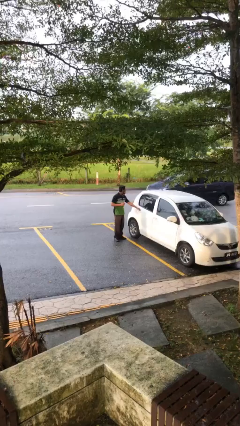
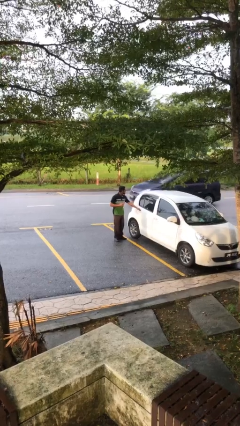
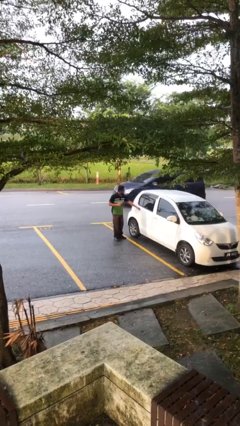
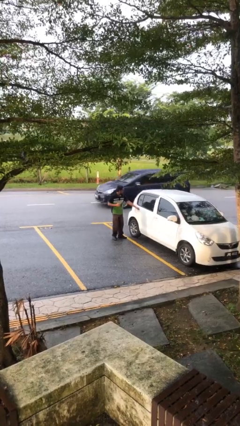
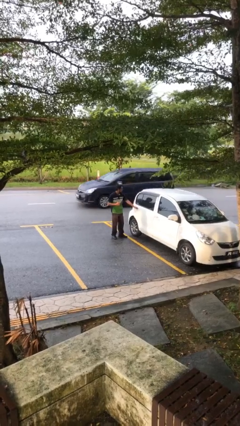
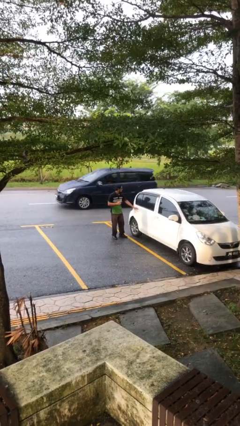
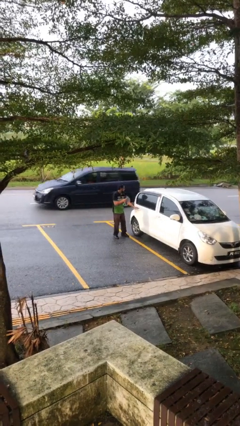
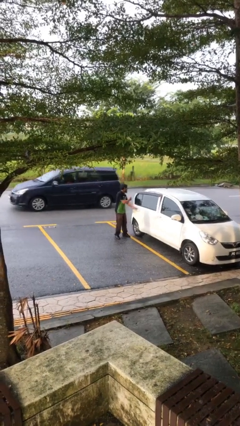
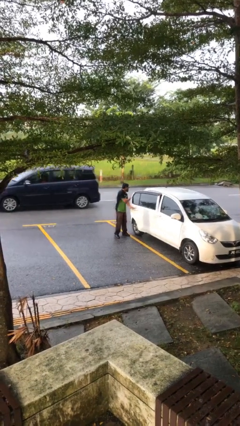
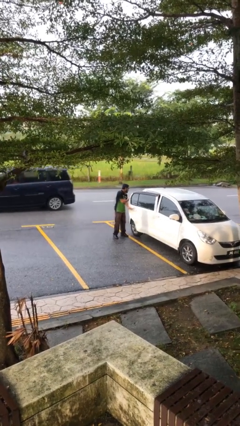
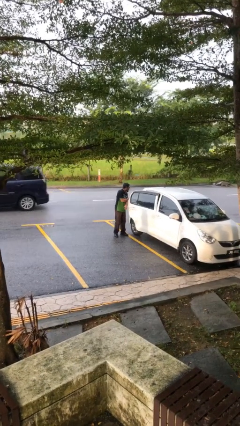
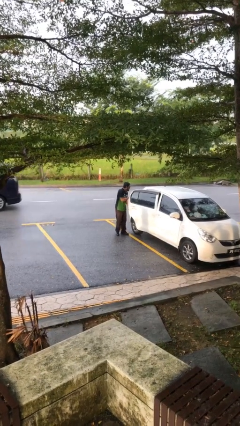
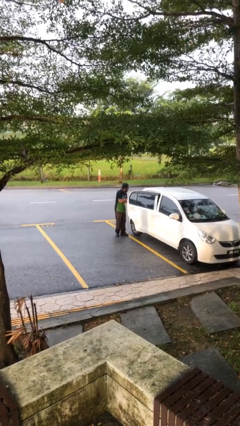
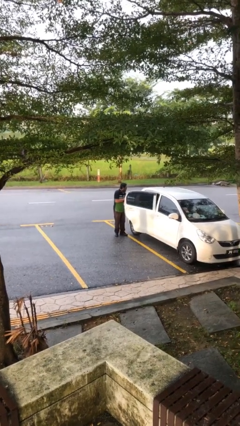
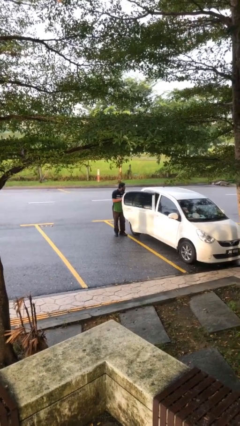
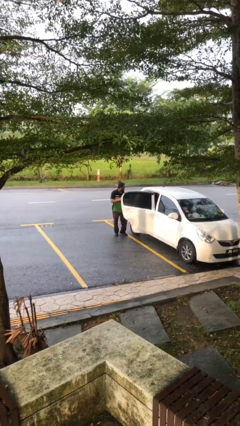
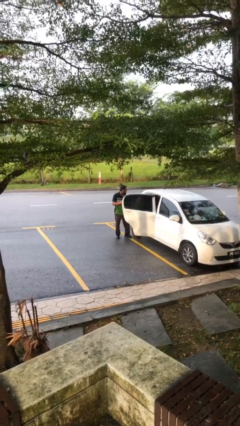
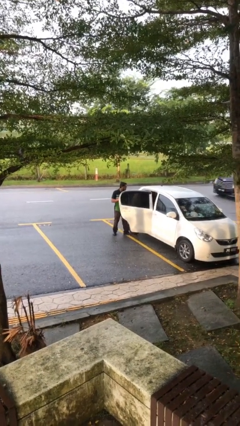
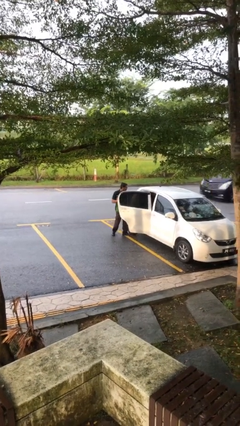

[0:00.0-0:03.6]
person opens car door

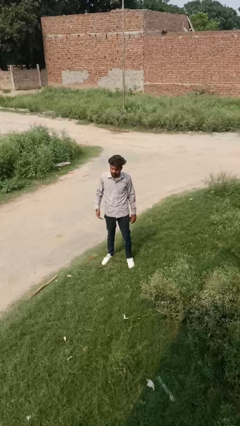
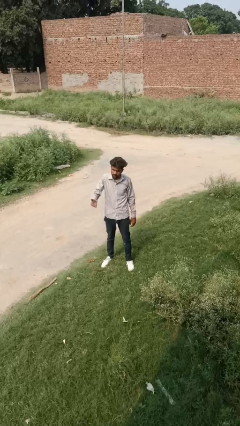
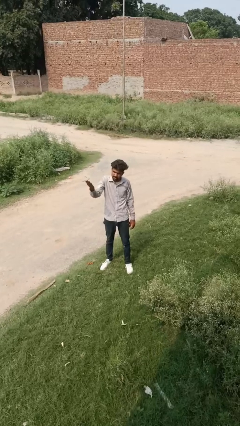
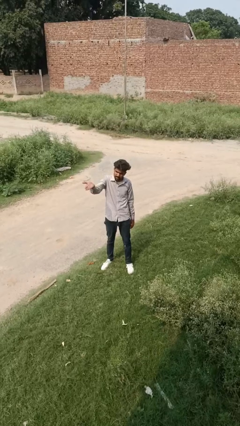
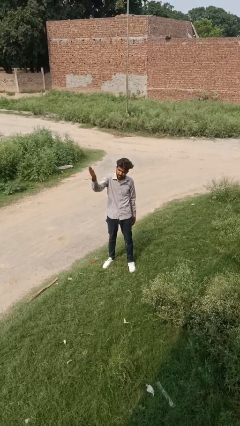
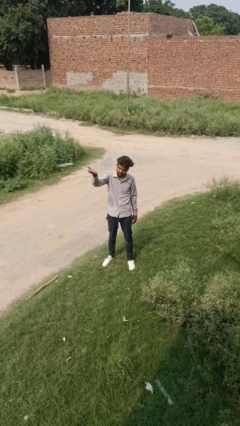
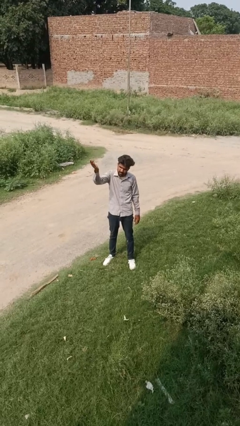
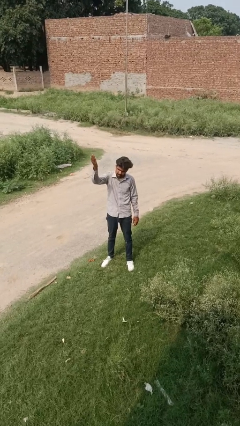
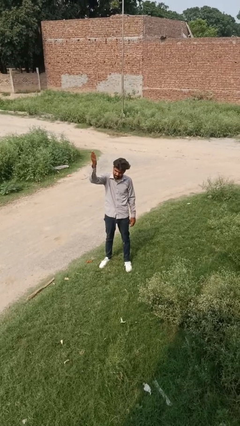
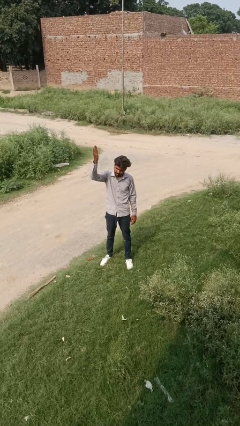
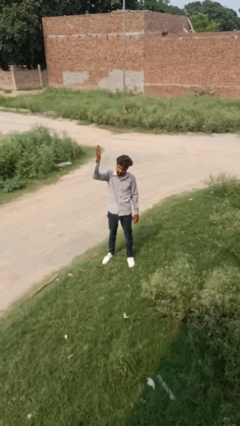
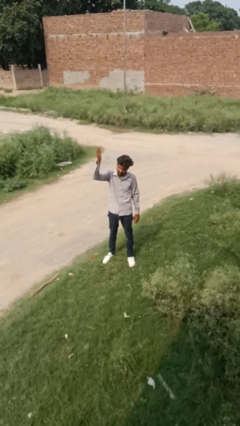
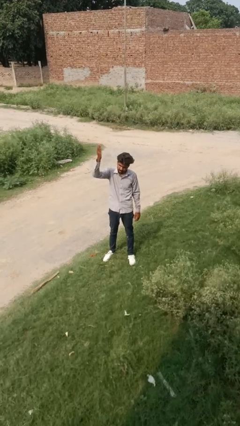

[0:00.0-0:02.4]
person gestures swipe up

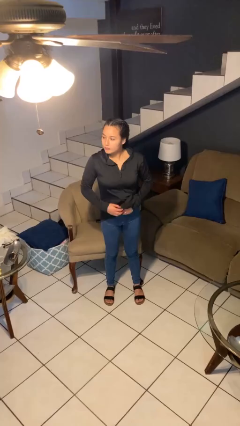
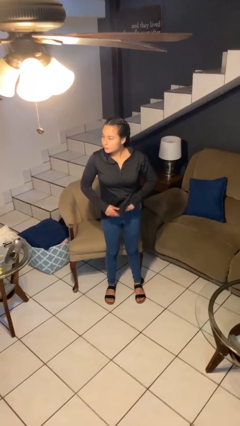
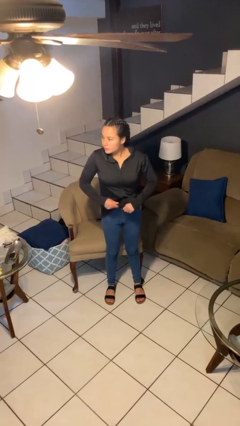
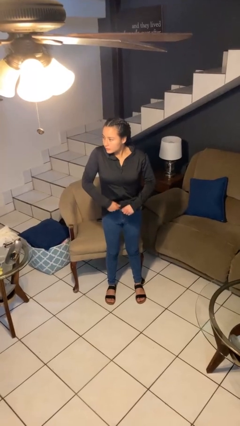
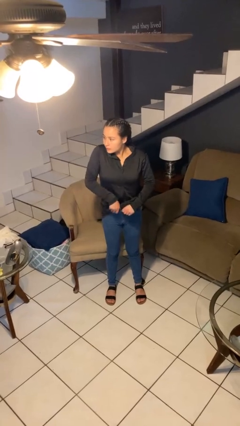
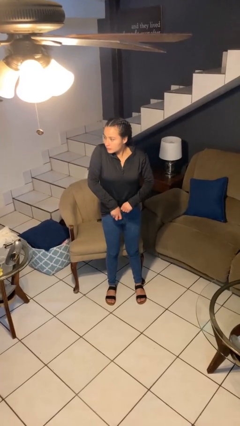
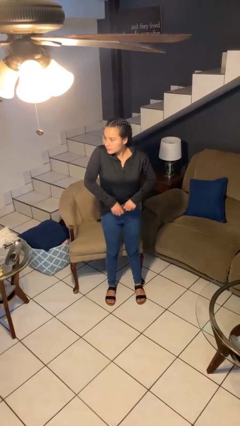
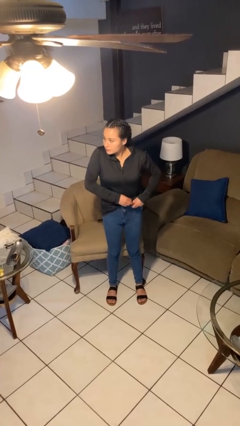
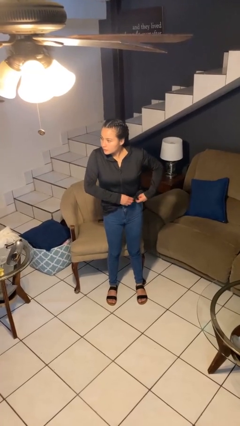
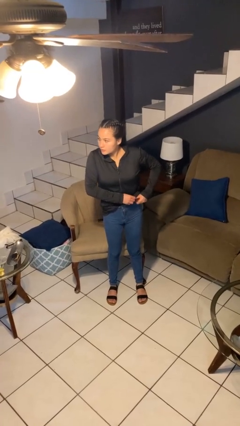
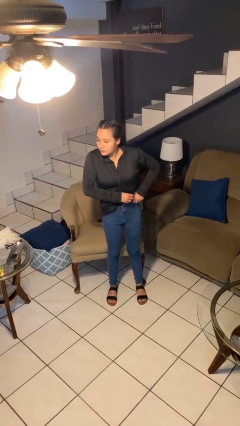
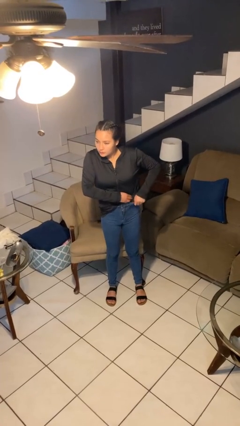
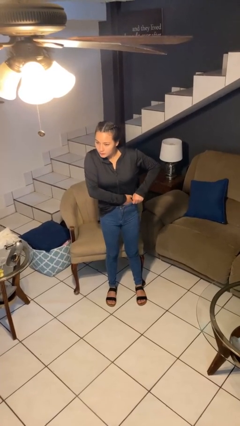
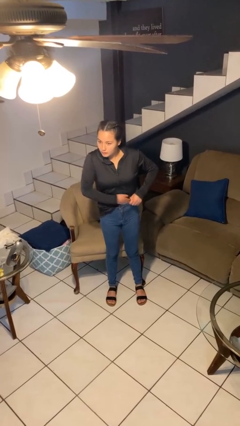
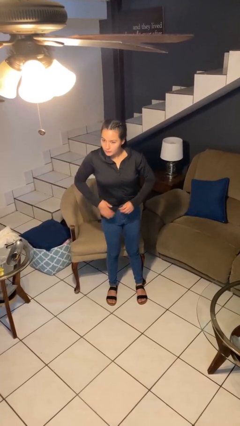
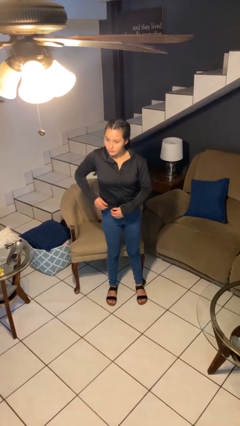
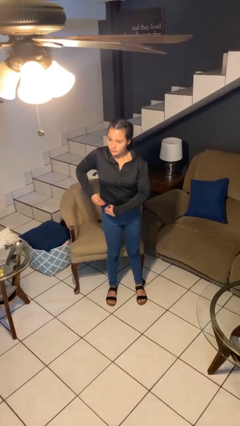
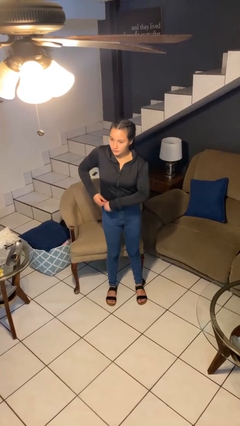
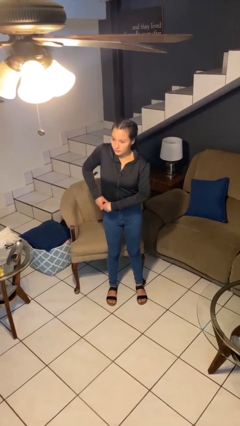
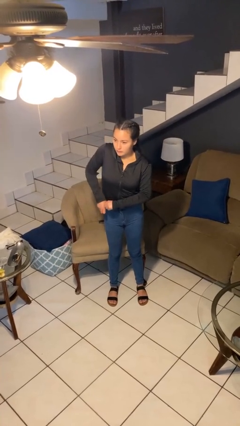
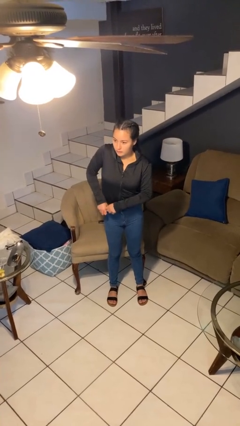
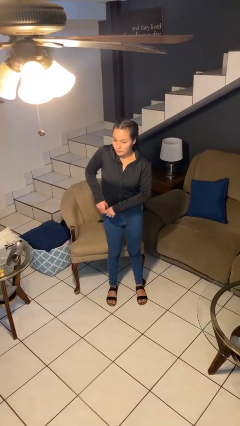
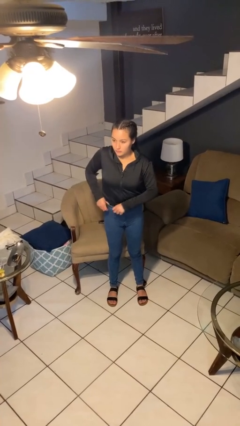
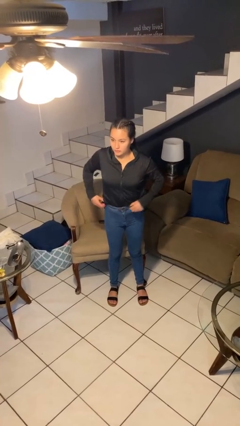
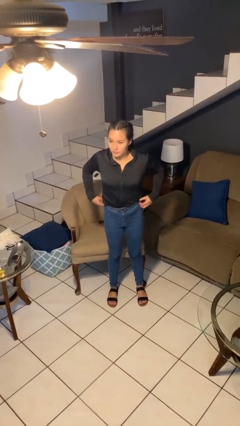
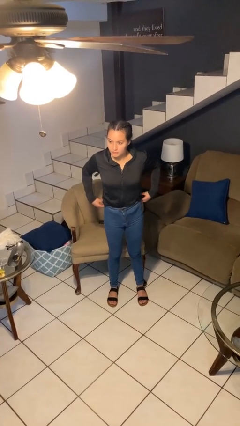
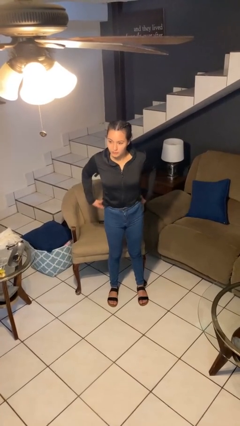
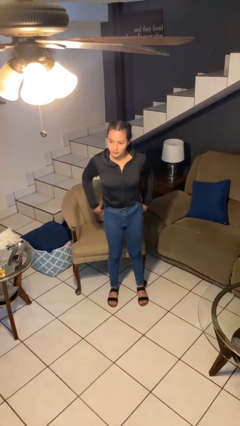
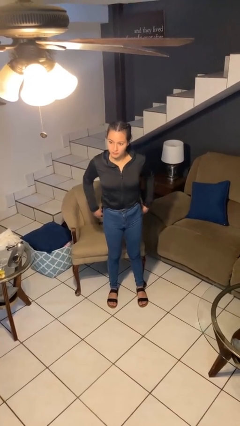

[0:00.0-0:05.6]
person tucks in shirt

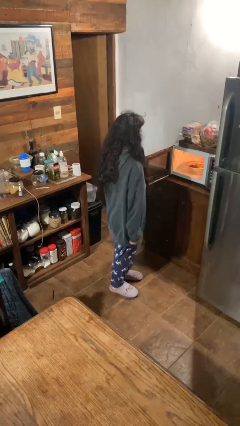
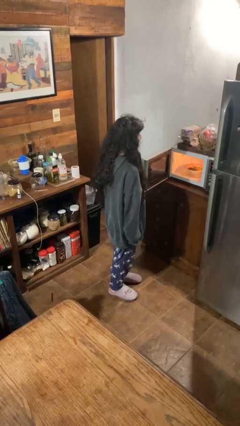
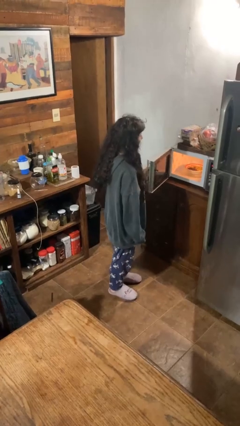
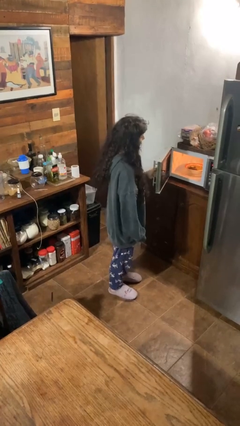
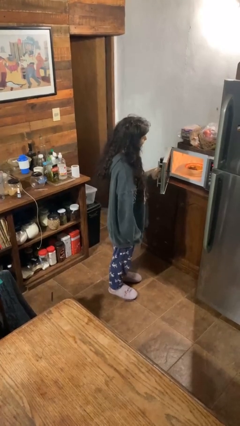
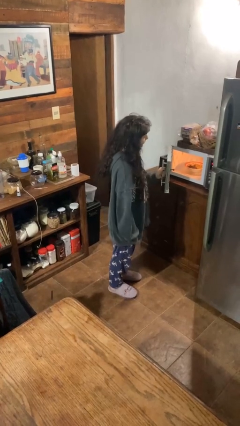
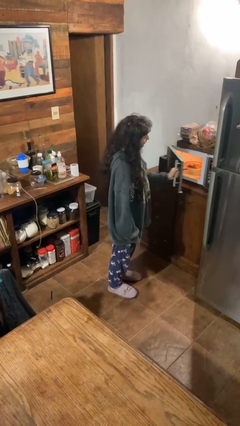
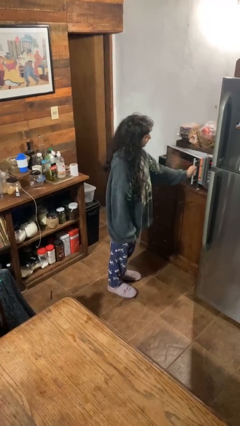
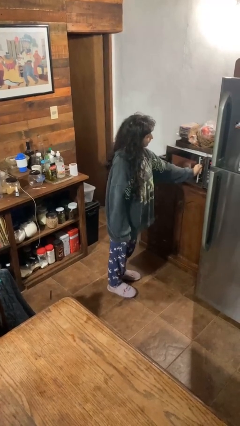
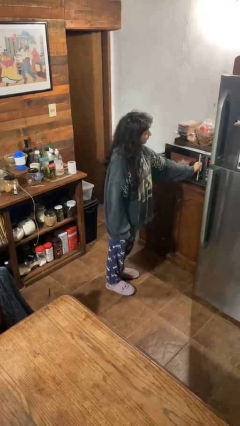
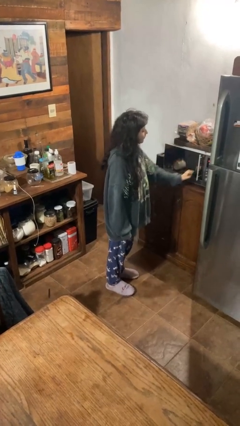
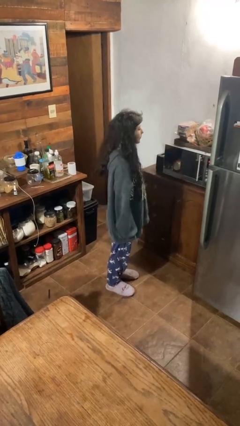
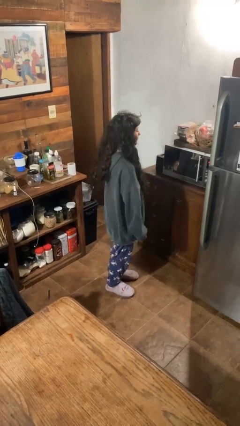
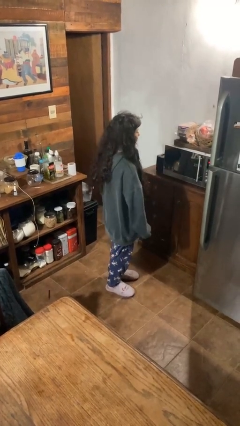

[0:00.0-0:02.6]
person closes microwave

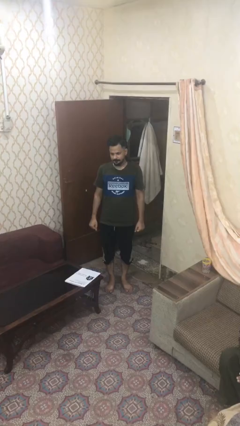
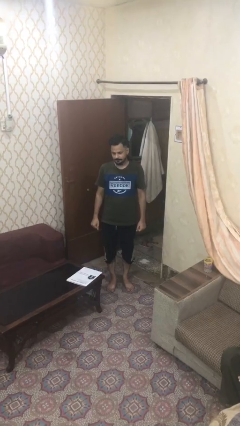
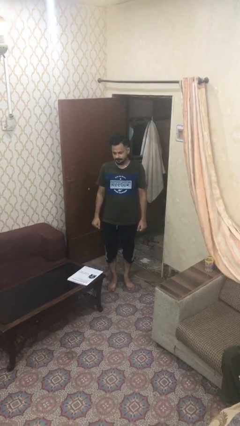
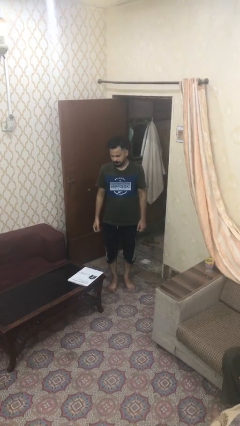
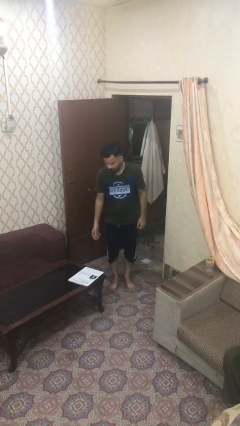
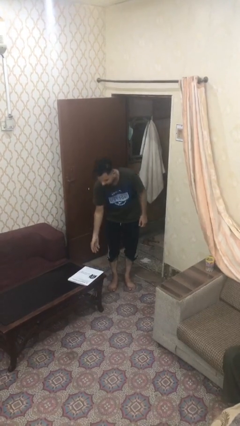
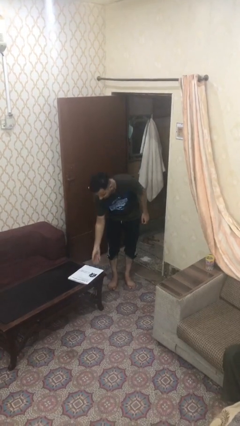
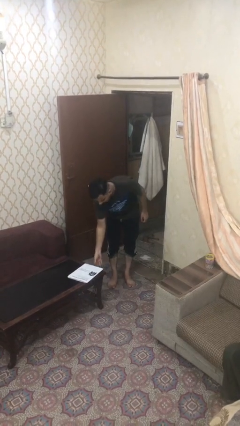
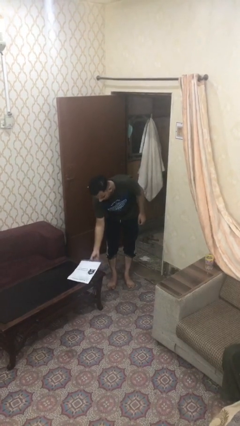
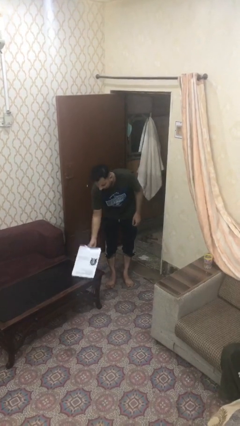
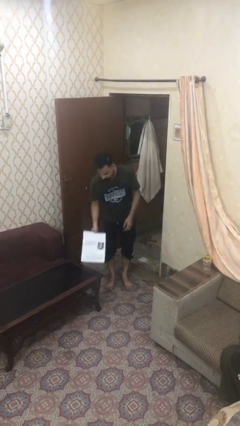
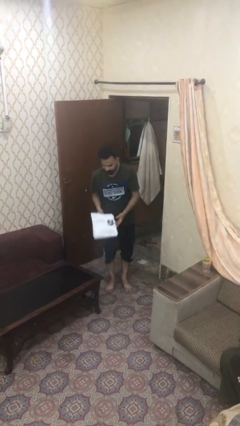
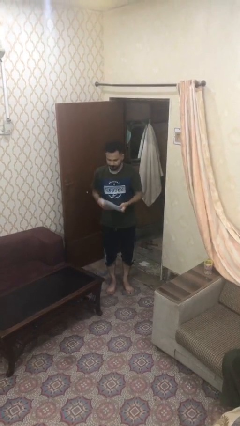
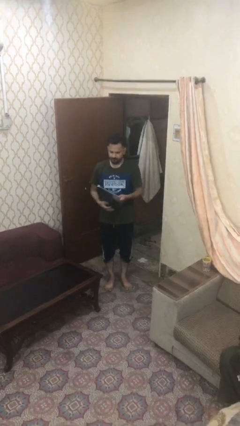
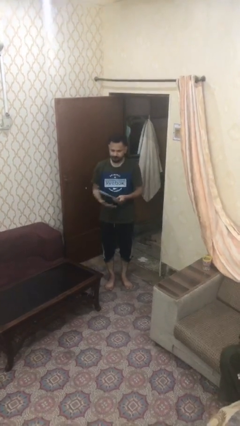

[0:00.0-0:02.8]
person picks up object from table

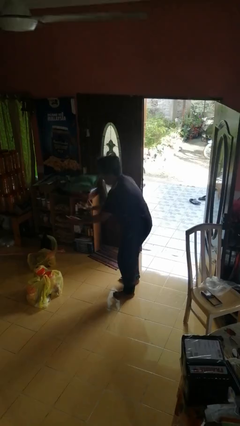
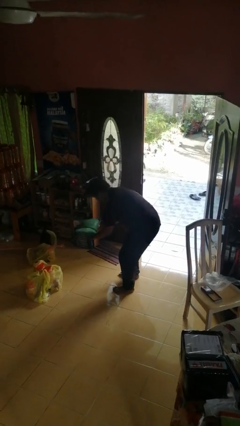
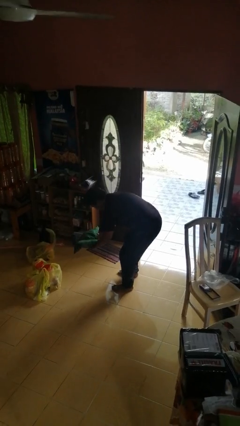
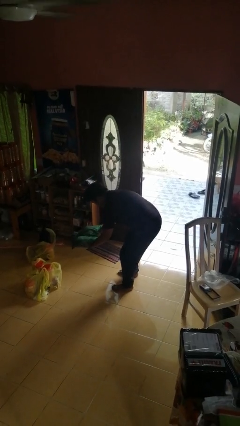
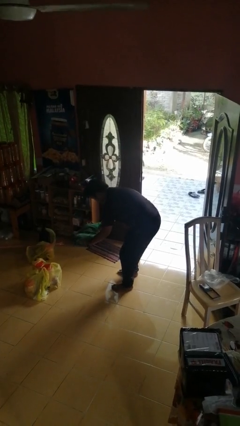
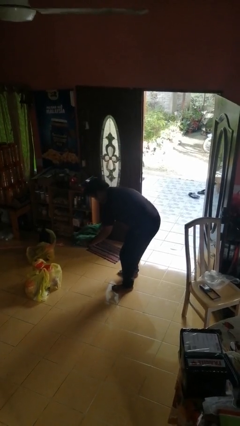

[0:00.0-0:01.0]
person catches dropped object
